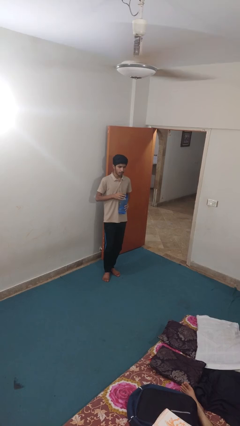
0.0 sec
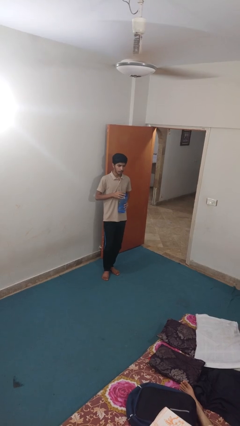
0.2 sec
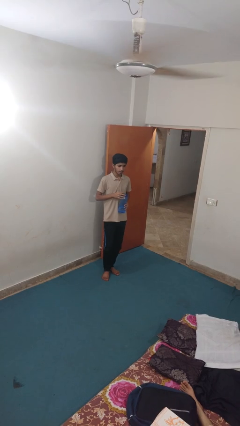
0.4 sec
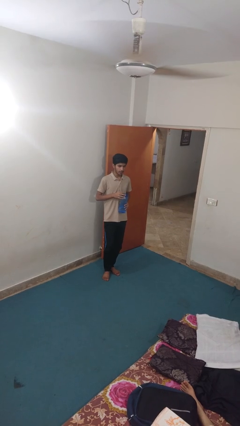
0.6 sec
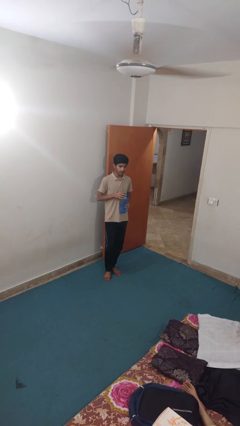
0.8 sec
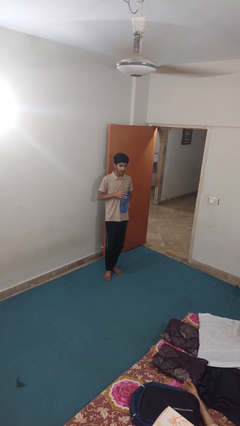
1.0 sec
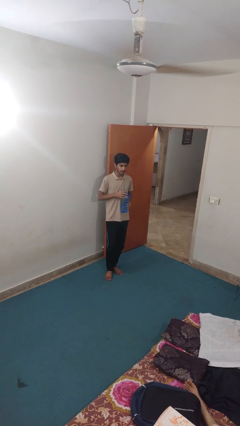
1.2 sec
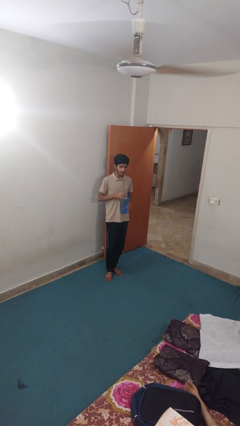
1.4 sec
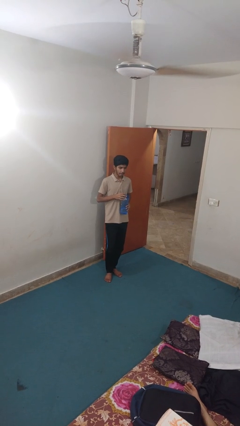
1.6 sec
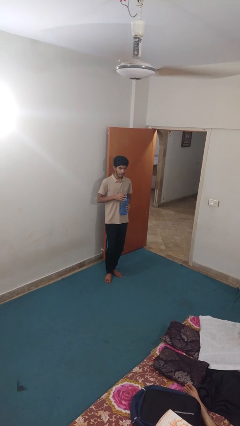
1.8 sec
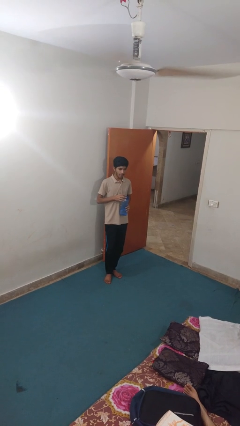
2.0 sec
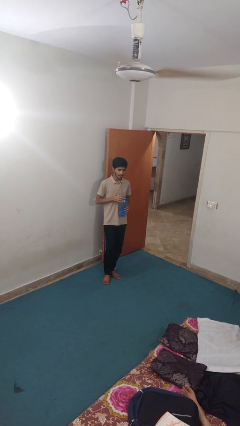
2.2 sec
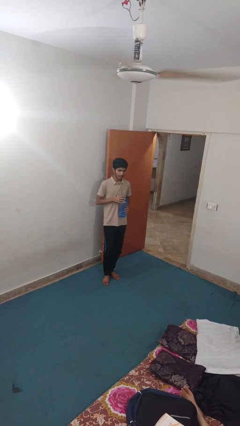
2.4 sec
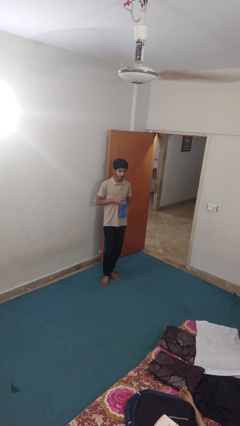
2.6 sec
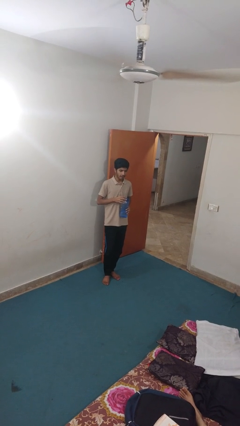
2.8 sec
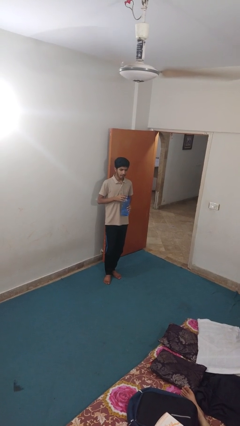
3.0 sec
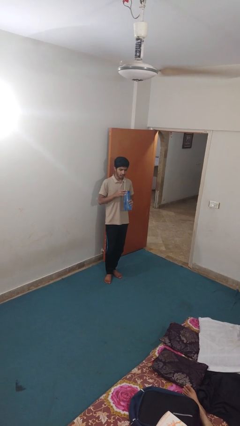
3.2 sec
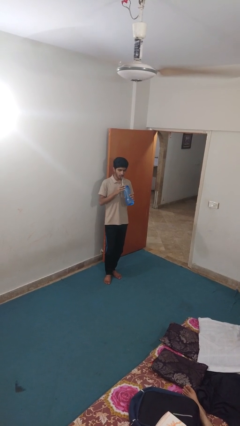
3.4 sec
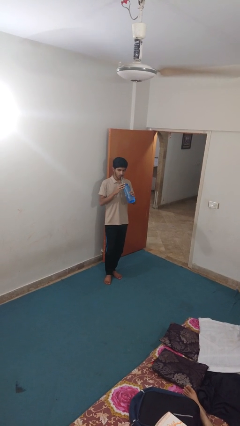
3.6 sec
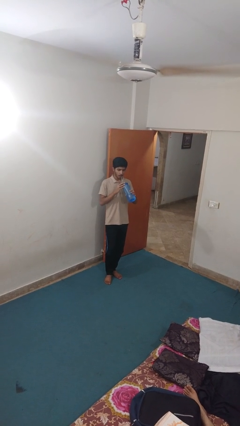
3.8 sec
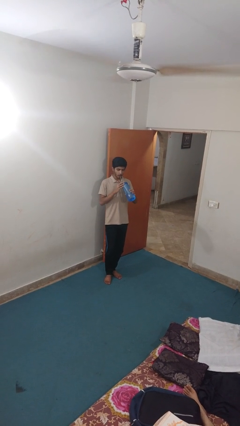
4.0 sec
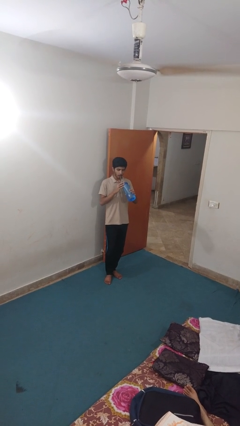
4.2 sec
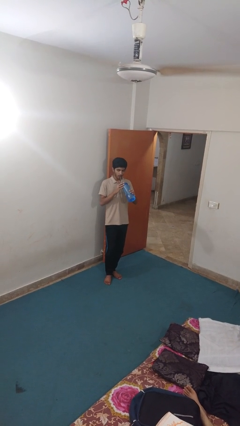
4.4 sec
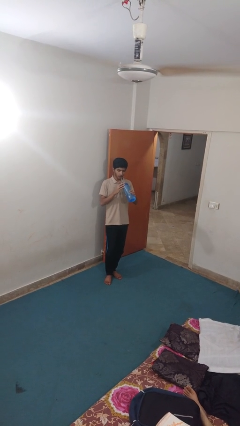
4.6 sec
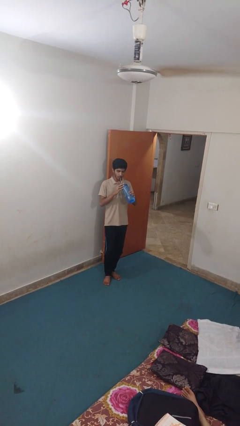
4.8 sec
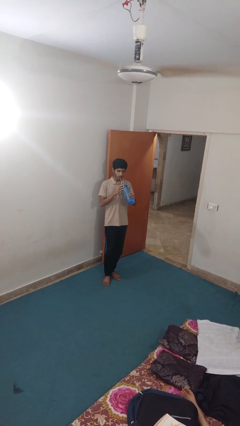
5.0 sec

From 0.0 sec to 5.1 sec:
person drinks from straw

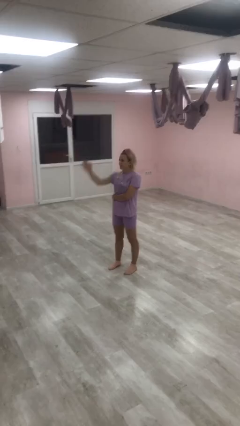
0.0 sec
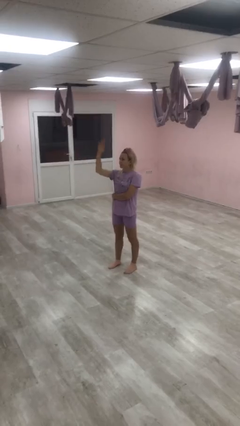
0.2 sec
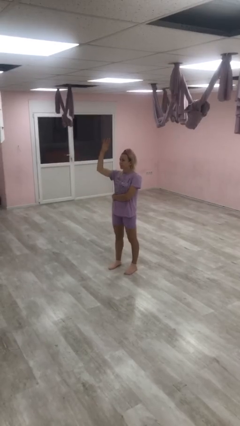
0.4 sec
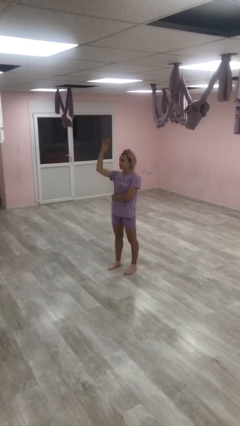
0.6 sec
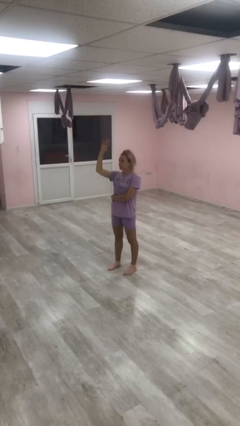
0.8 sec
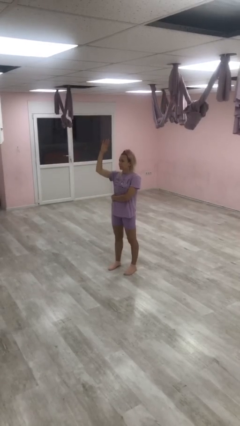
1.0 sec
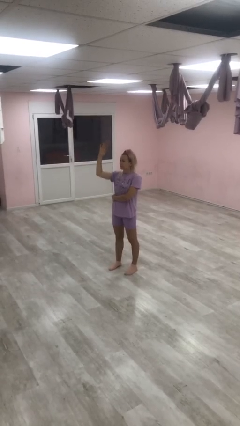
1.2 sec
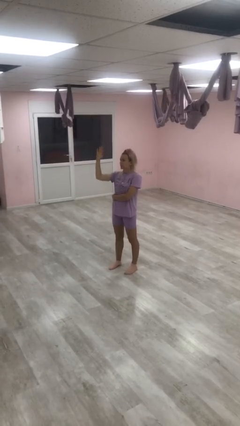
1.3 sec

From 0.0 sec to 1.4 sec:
person gestures raise hand

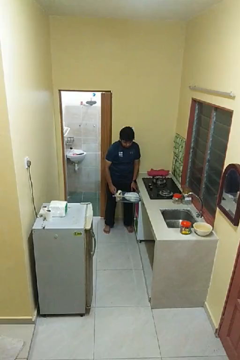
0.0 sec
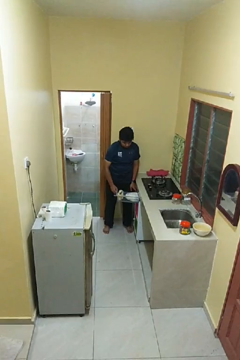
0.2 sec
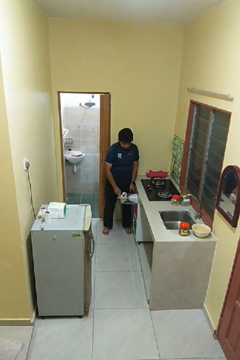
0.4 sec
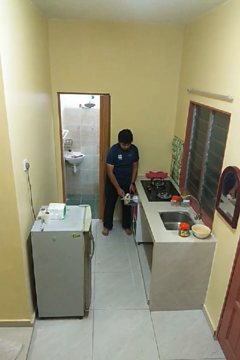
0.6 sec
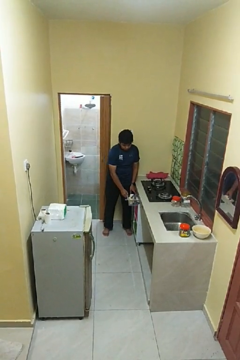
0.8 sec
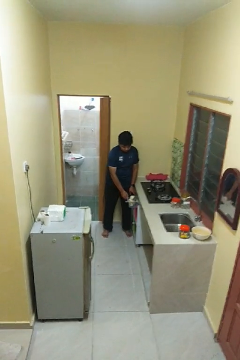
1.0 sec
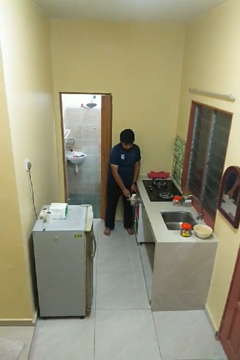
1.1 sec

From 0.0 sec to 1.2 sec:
person closes kitchen drawer

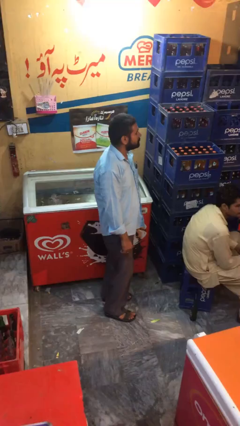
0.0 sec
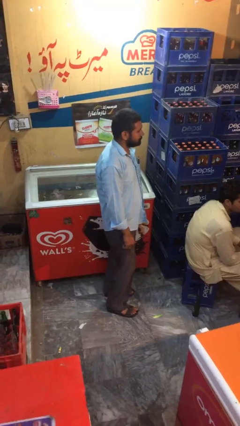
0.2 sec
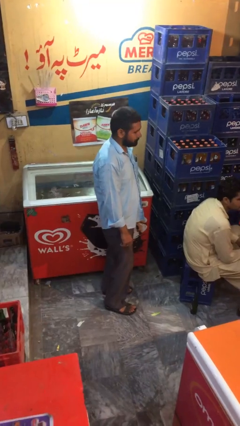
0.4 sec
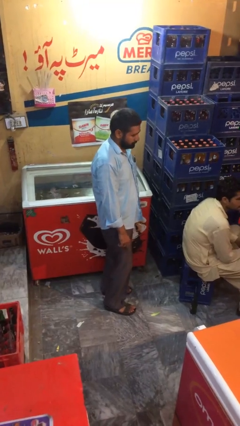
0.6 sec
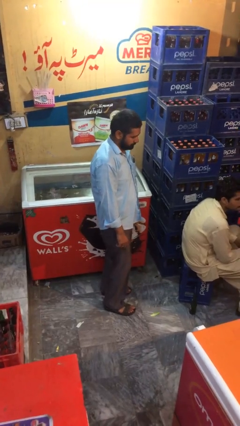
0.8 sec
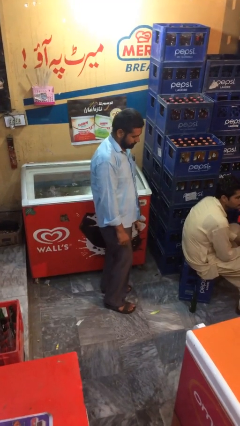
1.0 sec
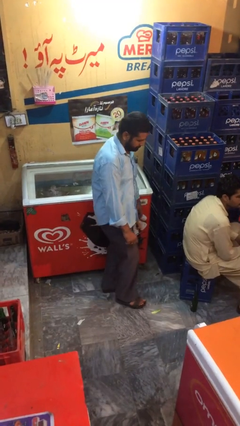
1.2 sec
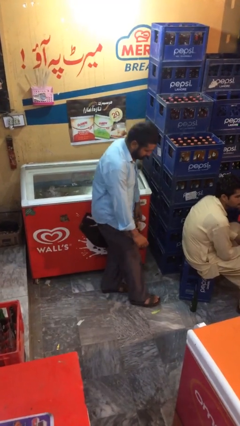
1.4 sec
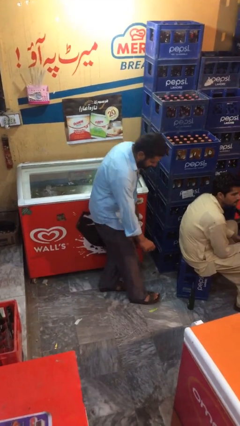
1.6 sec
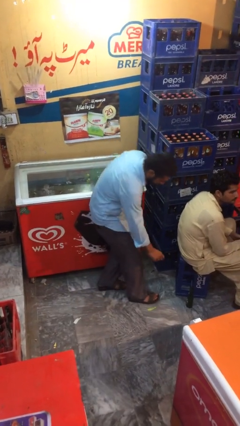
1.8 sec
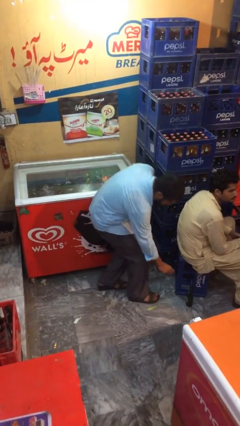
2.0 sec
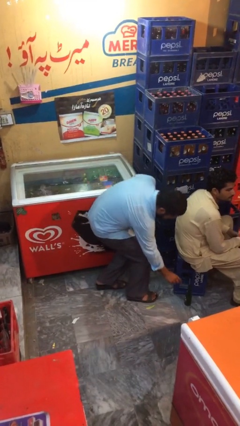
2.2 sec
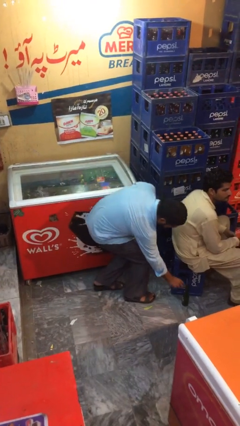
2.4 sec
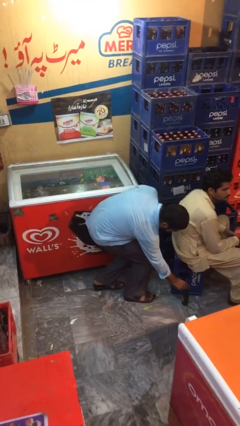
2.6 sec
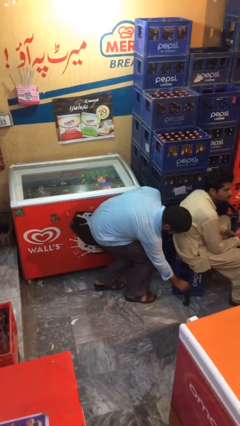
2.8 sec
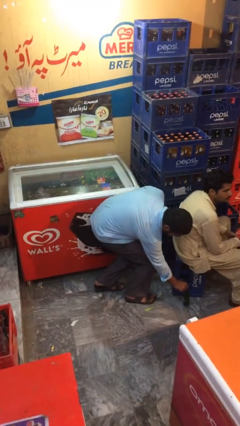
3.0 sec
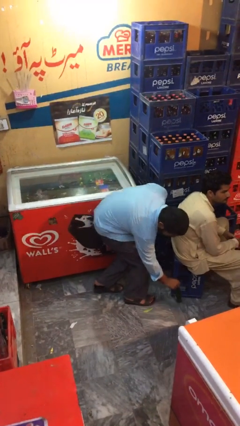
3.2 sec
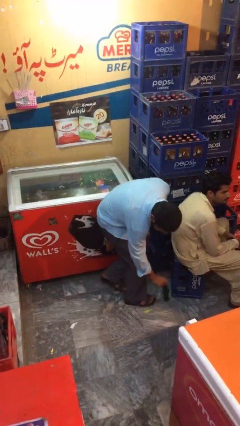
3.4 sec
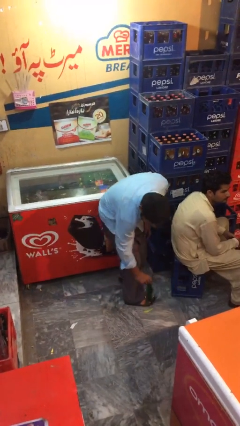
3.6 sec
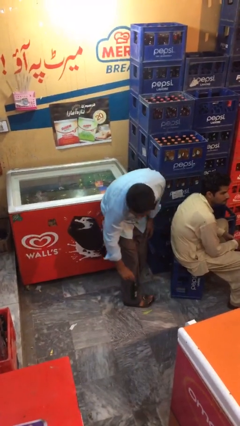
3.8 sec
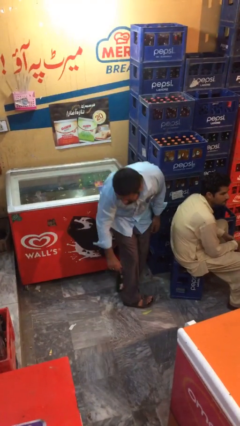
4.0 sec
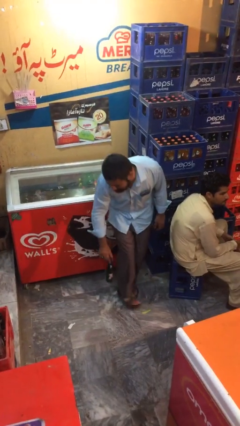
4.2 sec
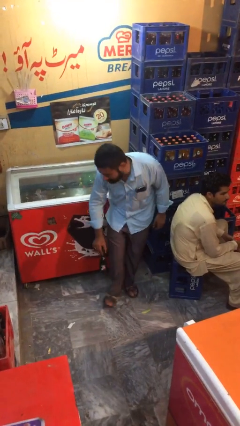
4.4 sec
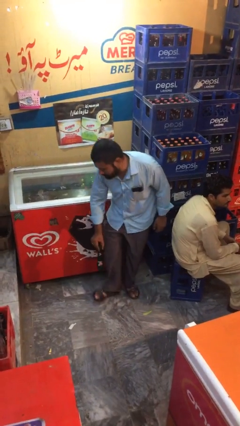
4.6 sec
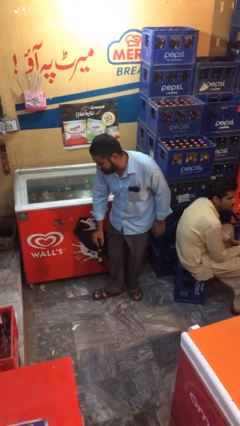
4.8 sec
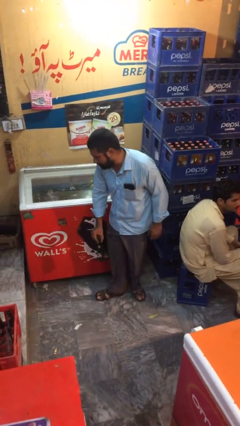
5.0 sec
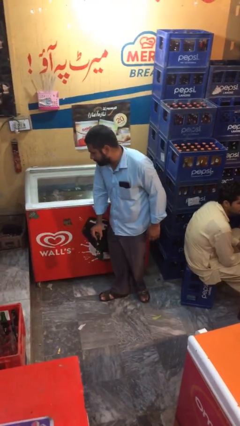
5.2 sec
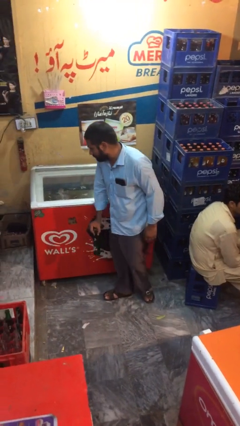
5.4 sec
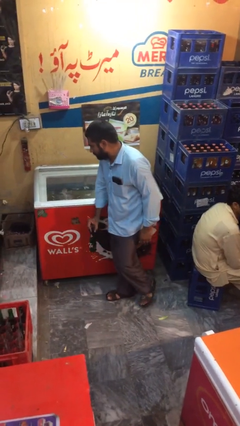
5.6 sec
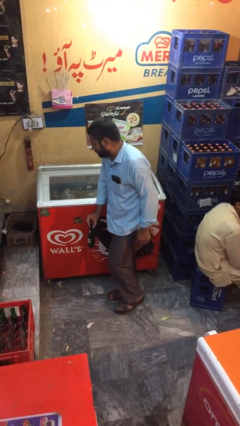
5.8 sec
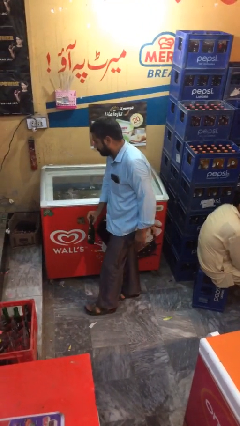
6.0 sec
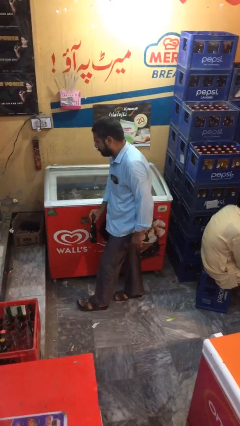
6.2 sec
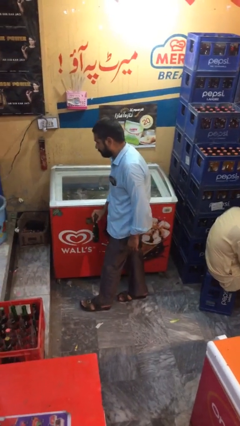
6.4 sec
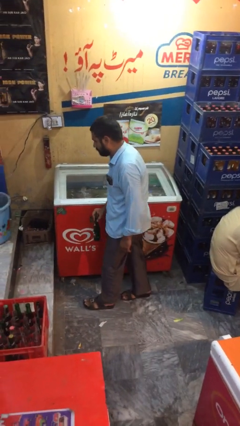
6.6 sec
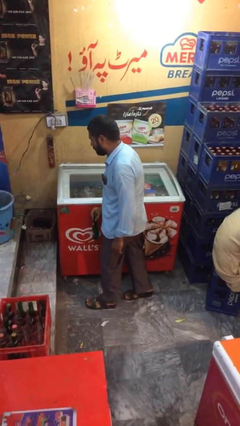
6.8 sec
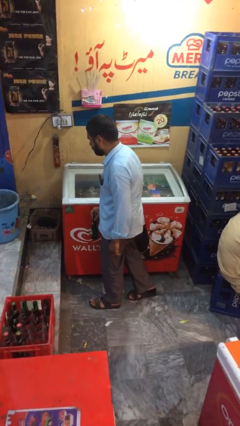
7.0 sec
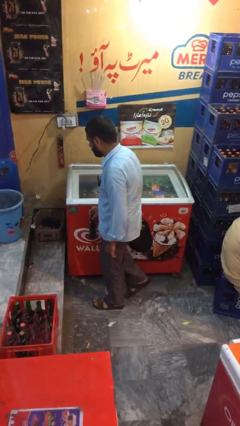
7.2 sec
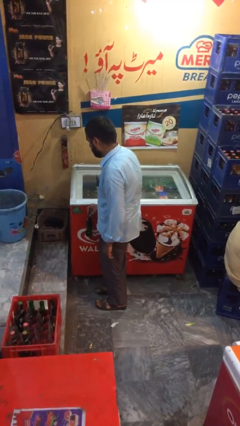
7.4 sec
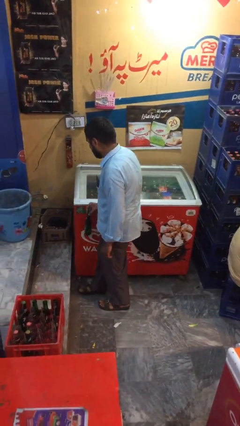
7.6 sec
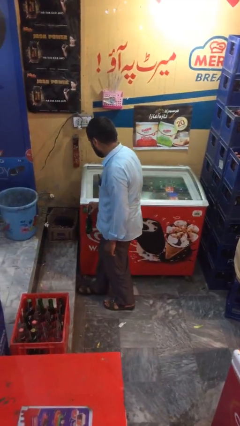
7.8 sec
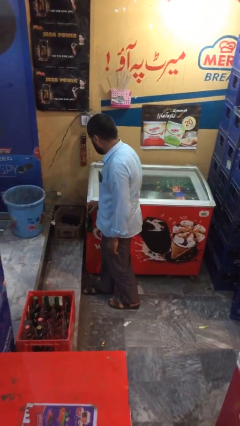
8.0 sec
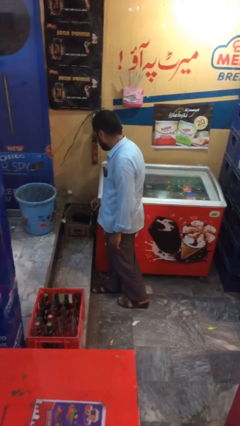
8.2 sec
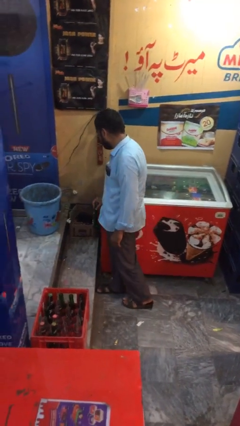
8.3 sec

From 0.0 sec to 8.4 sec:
person steals object from person

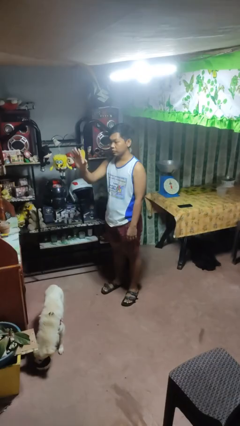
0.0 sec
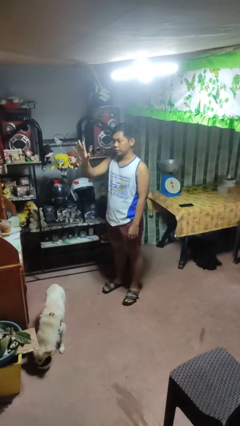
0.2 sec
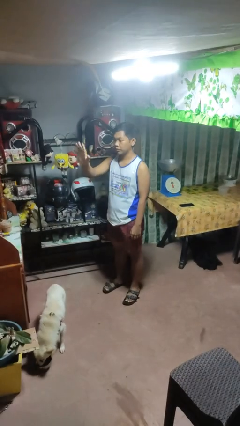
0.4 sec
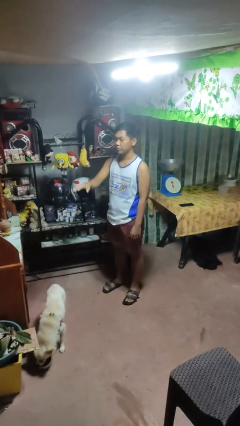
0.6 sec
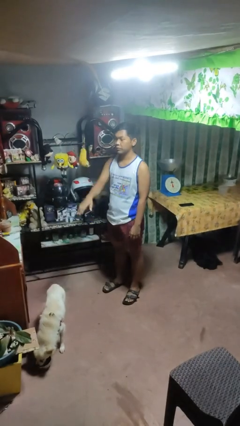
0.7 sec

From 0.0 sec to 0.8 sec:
person gestures stop

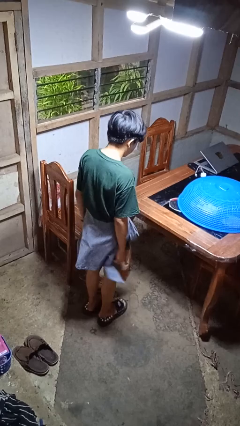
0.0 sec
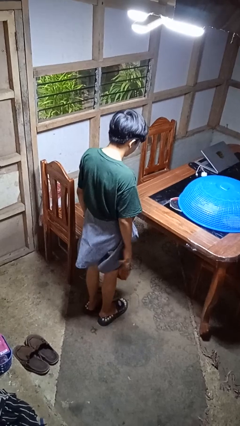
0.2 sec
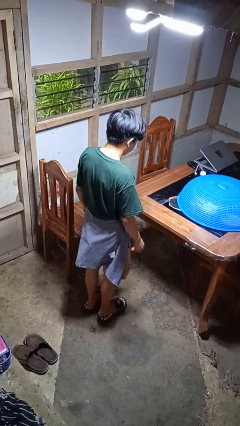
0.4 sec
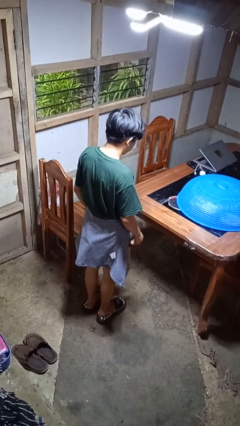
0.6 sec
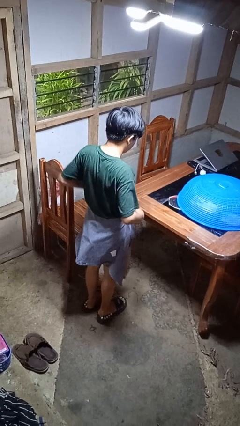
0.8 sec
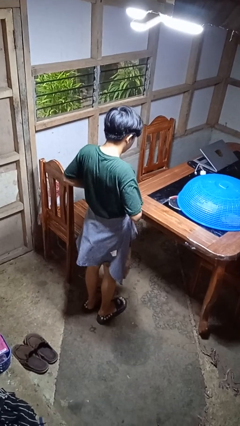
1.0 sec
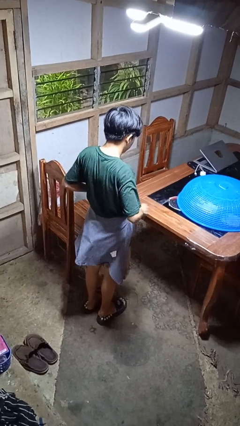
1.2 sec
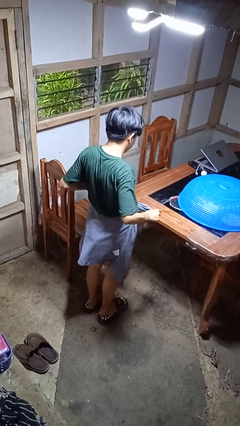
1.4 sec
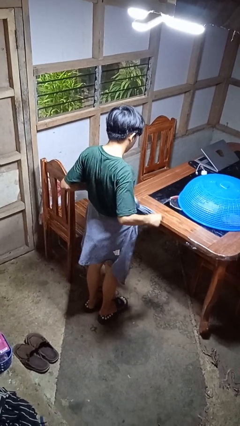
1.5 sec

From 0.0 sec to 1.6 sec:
person unties jacket around waist
